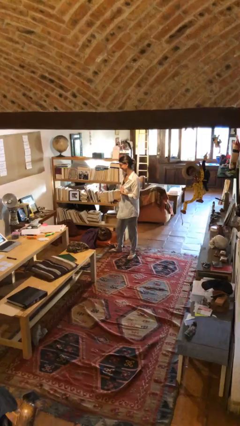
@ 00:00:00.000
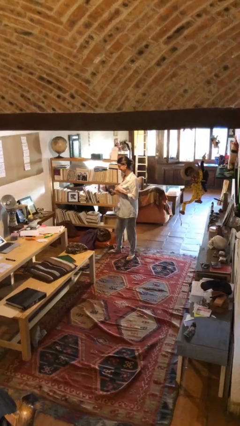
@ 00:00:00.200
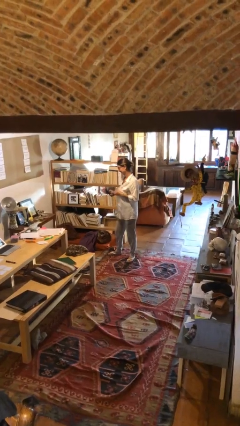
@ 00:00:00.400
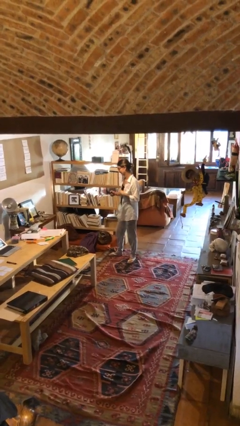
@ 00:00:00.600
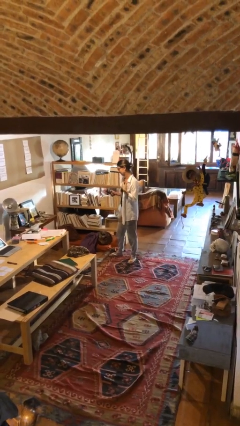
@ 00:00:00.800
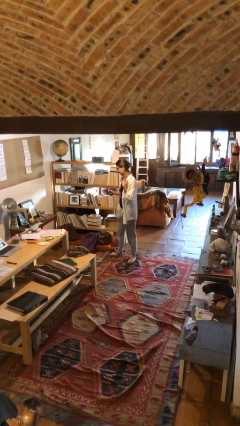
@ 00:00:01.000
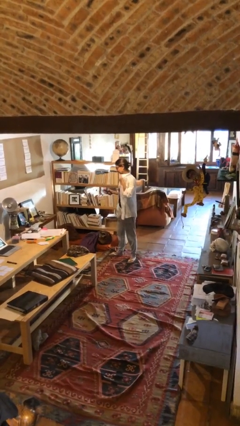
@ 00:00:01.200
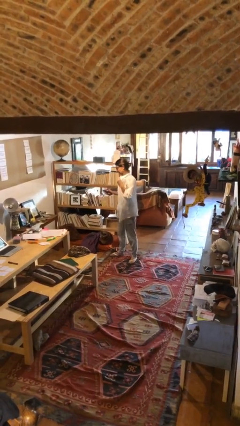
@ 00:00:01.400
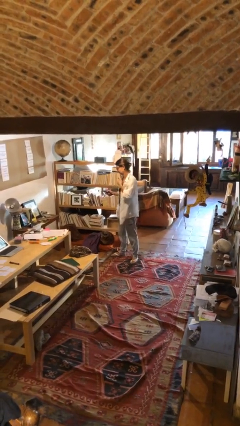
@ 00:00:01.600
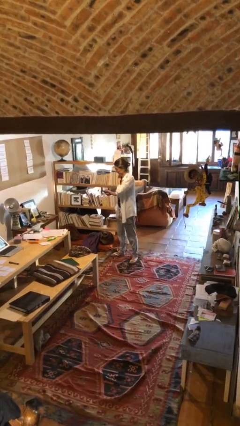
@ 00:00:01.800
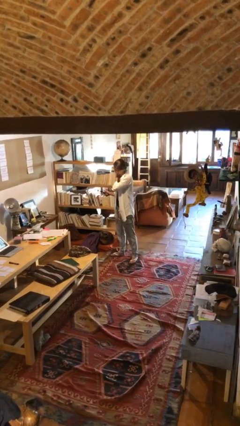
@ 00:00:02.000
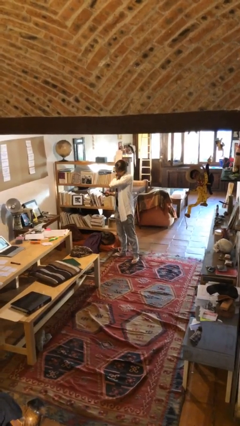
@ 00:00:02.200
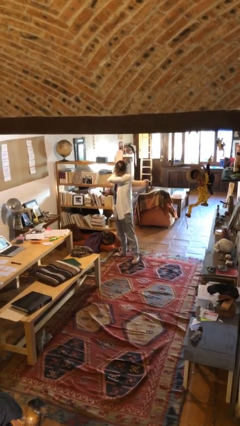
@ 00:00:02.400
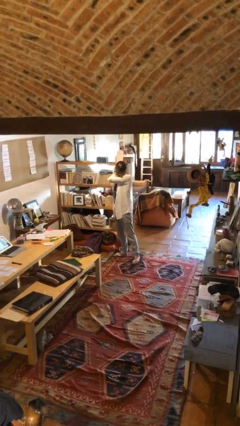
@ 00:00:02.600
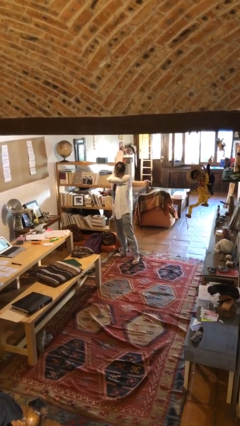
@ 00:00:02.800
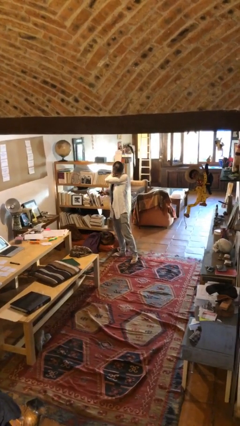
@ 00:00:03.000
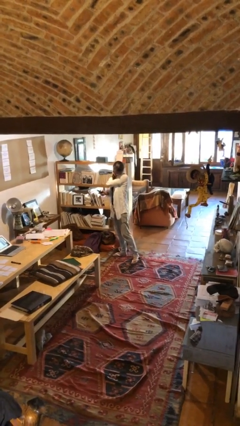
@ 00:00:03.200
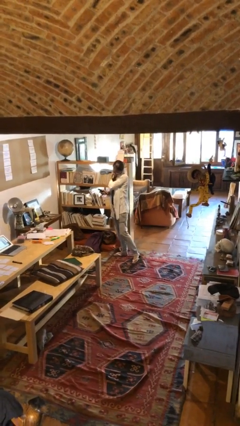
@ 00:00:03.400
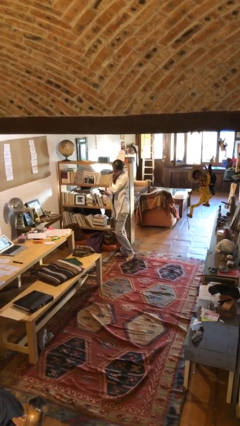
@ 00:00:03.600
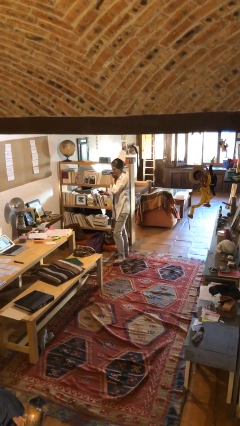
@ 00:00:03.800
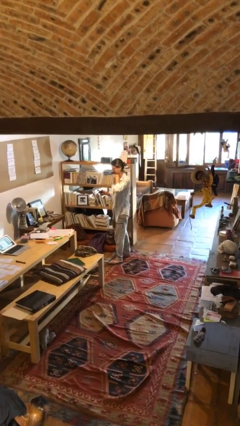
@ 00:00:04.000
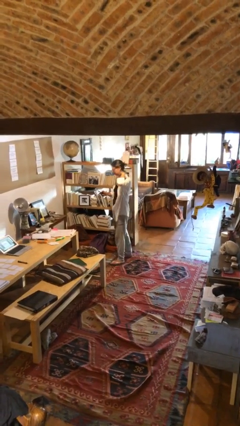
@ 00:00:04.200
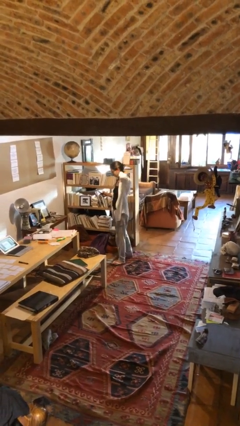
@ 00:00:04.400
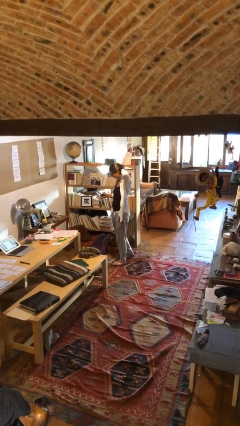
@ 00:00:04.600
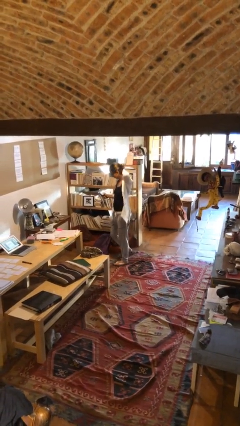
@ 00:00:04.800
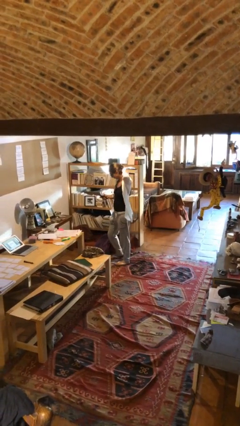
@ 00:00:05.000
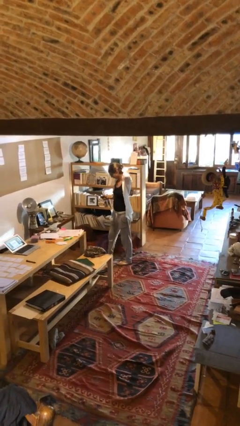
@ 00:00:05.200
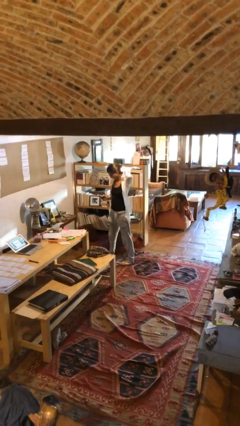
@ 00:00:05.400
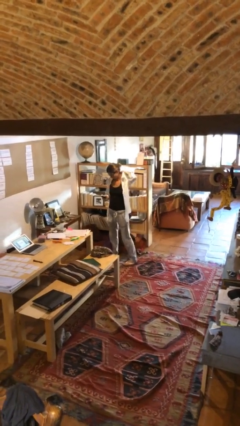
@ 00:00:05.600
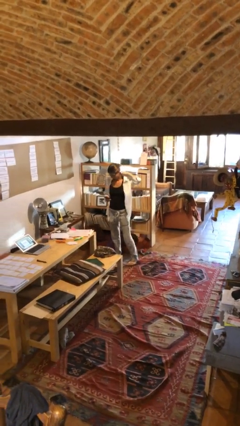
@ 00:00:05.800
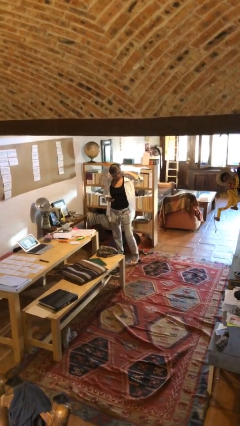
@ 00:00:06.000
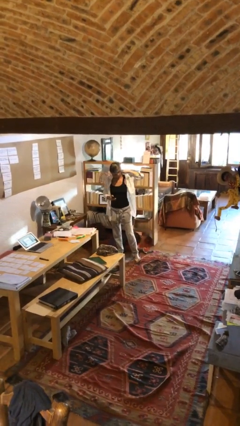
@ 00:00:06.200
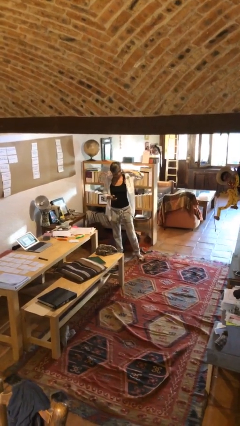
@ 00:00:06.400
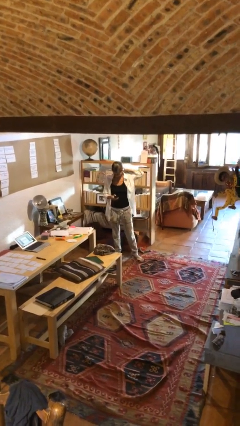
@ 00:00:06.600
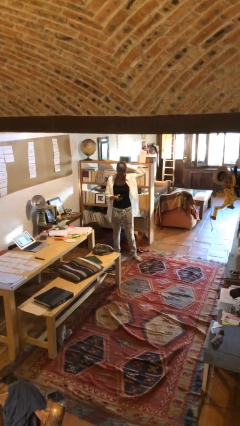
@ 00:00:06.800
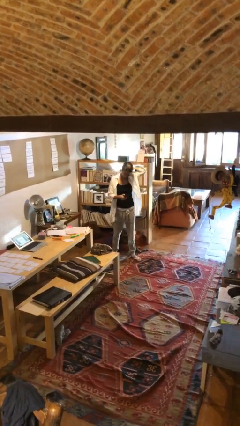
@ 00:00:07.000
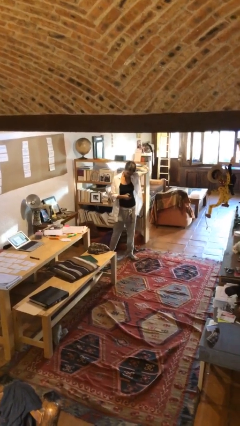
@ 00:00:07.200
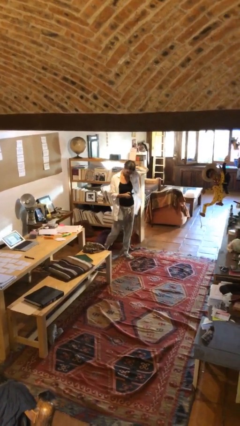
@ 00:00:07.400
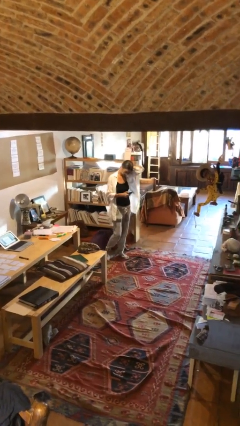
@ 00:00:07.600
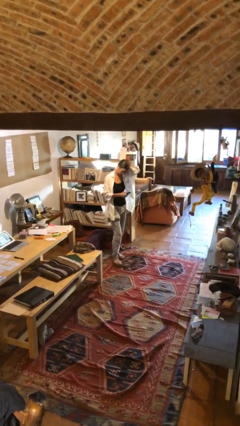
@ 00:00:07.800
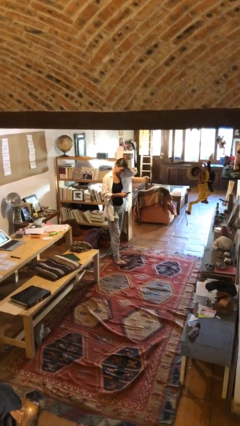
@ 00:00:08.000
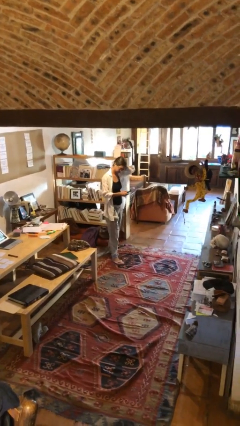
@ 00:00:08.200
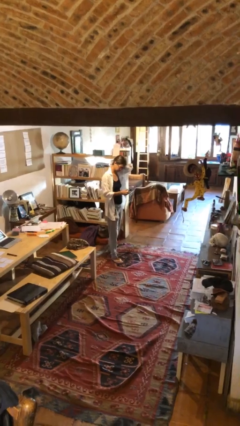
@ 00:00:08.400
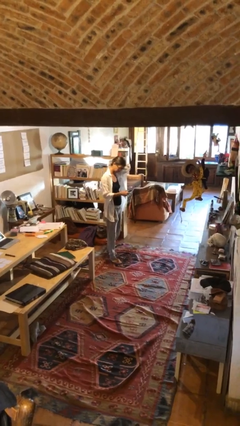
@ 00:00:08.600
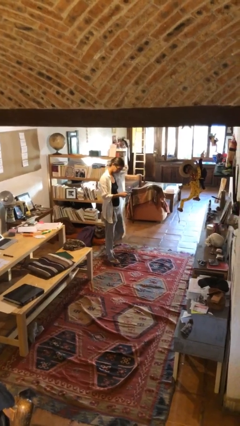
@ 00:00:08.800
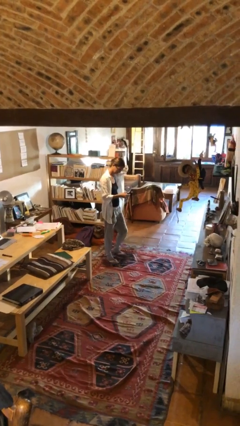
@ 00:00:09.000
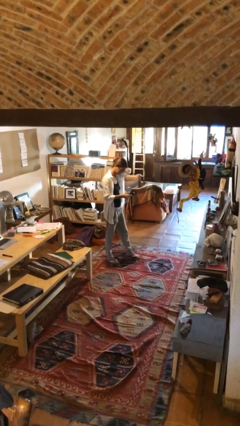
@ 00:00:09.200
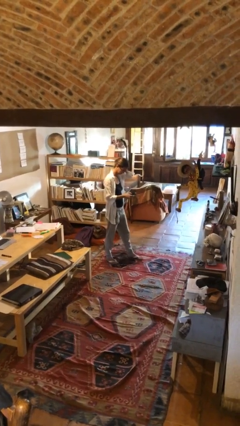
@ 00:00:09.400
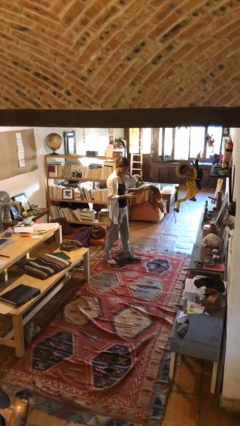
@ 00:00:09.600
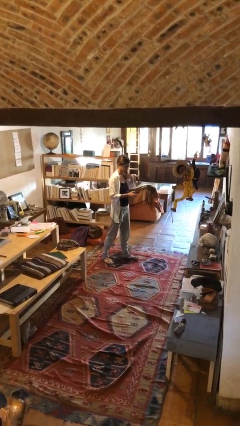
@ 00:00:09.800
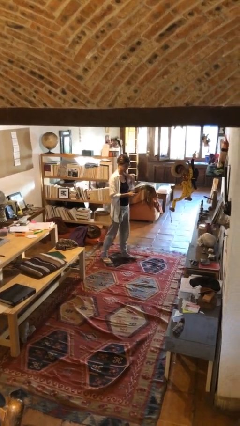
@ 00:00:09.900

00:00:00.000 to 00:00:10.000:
person texts on phone

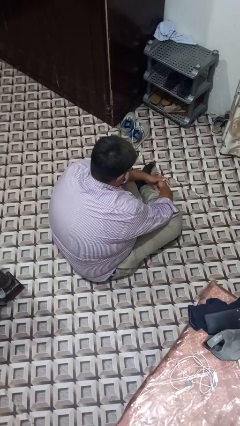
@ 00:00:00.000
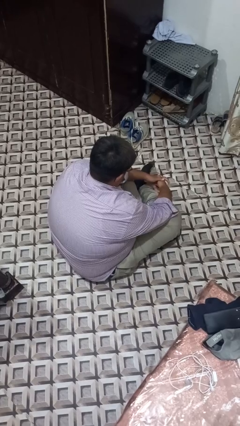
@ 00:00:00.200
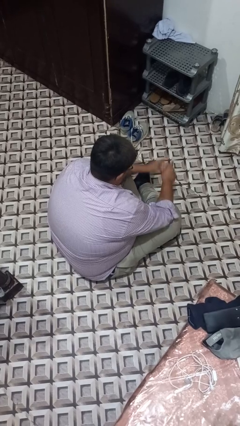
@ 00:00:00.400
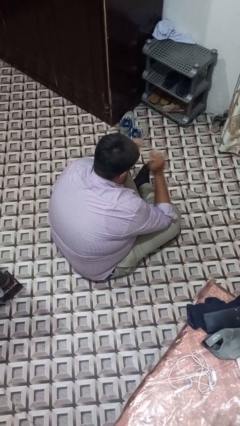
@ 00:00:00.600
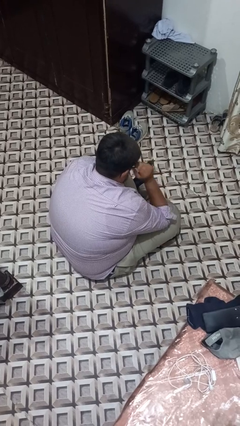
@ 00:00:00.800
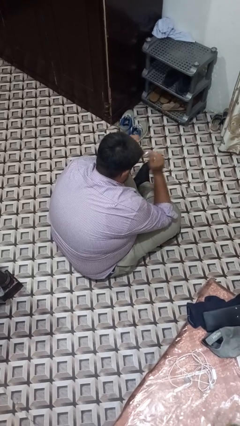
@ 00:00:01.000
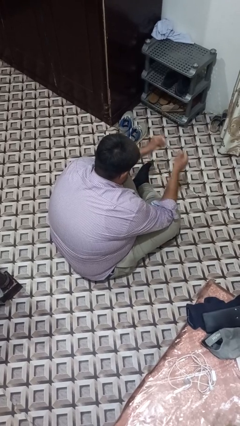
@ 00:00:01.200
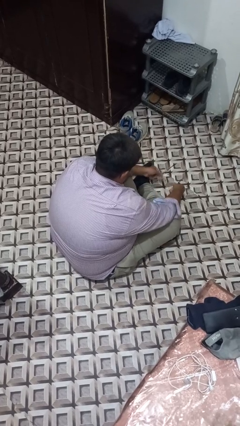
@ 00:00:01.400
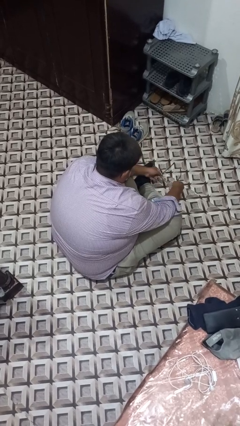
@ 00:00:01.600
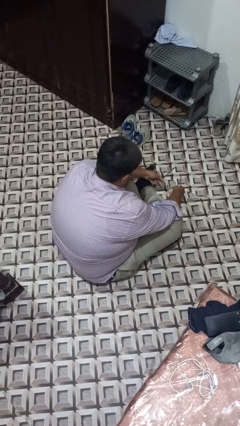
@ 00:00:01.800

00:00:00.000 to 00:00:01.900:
person takes off glasses

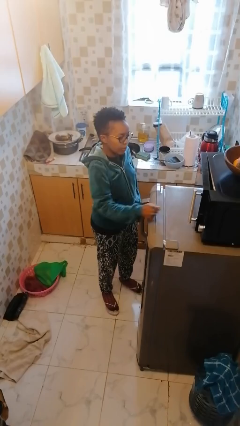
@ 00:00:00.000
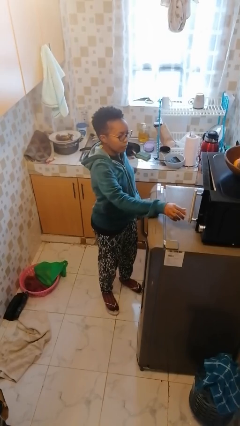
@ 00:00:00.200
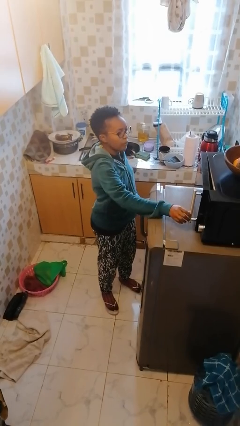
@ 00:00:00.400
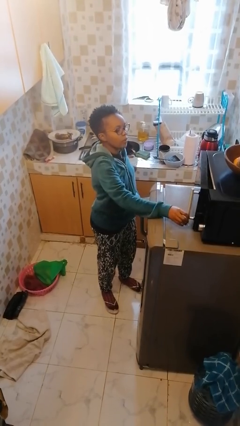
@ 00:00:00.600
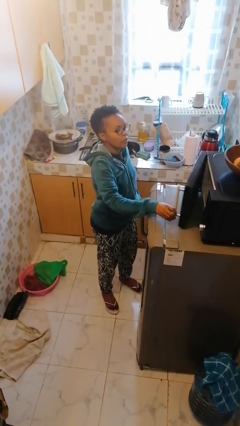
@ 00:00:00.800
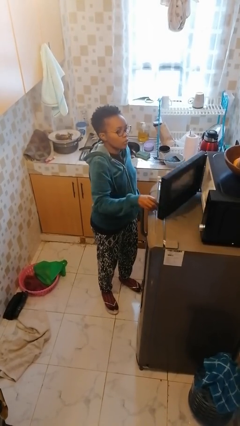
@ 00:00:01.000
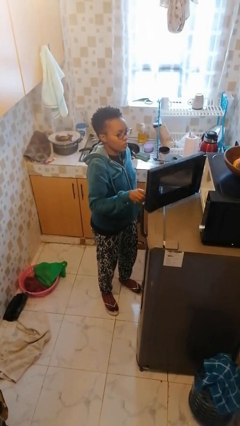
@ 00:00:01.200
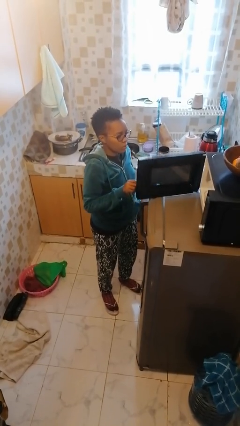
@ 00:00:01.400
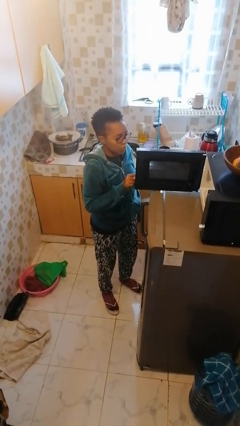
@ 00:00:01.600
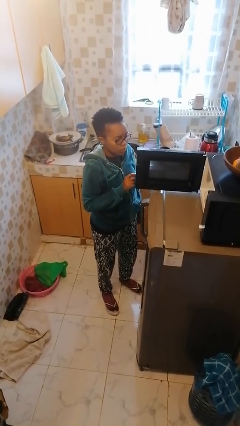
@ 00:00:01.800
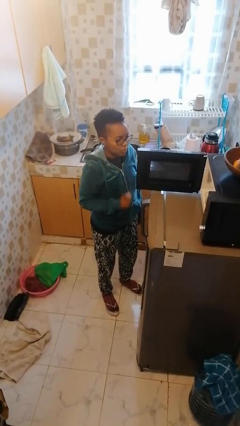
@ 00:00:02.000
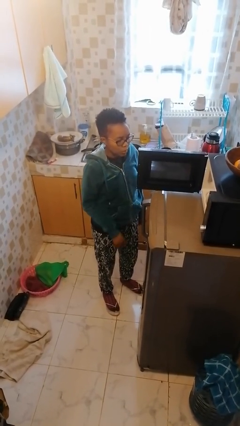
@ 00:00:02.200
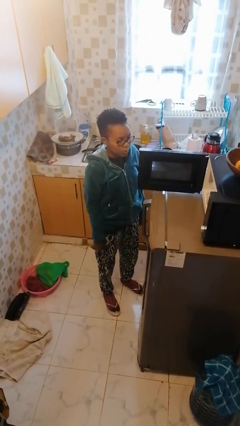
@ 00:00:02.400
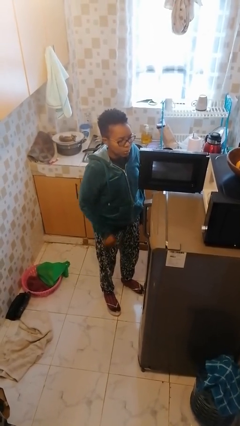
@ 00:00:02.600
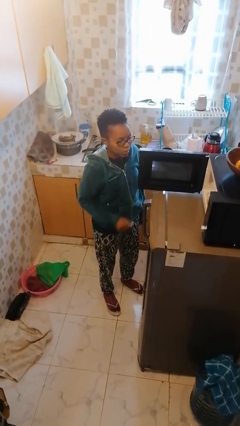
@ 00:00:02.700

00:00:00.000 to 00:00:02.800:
person opens microwave

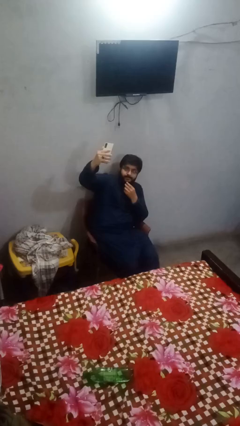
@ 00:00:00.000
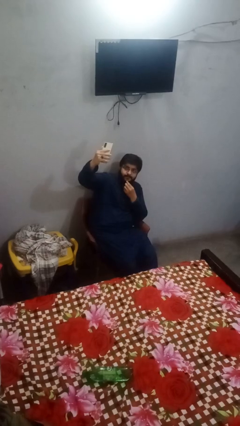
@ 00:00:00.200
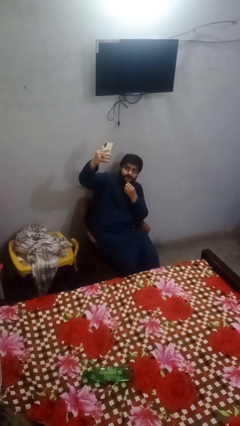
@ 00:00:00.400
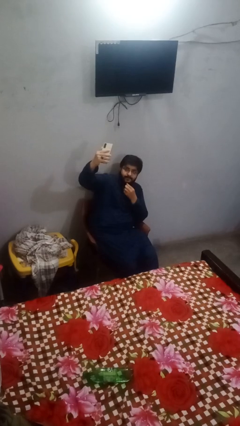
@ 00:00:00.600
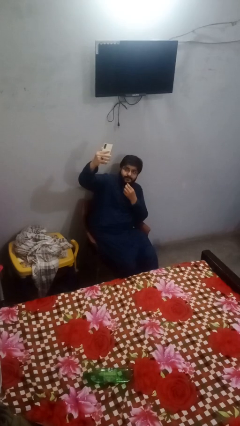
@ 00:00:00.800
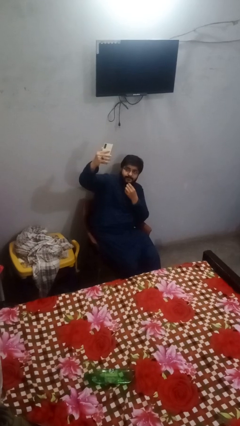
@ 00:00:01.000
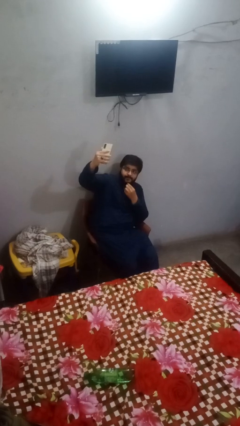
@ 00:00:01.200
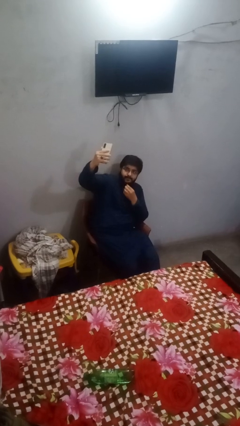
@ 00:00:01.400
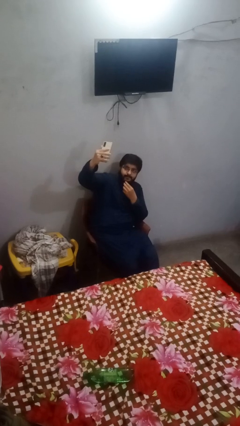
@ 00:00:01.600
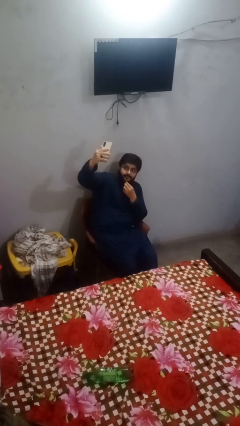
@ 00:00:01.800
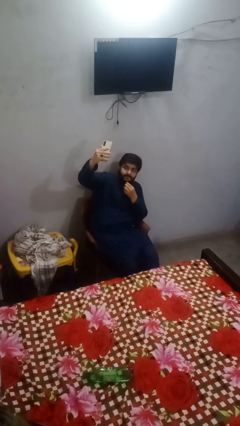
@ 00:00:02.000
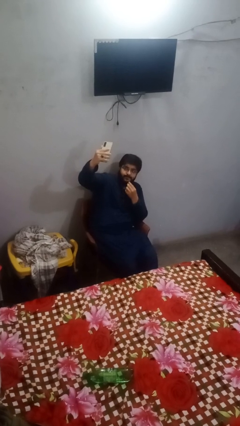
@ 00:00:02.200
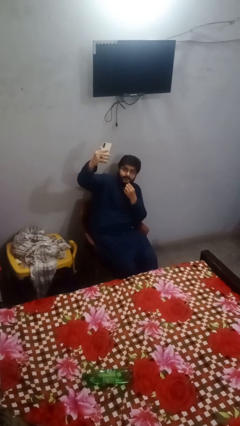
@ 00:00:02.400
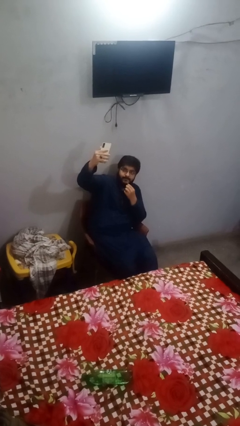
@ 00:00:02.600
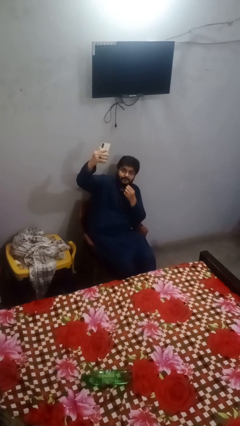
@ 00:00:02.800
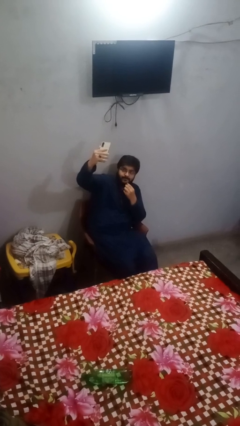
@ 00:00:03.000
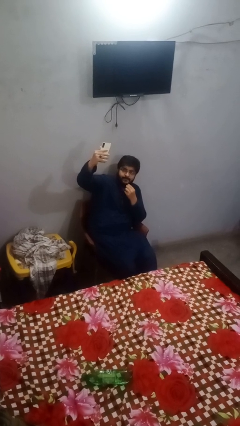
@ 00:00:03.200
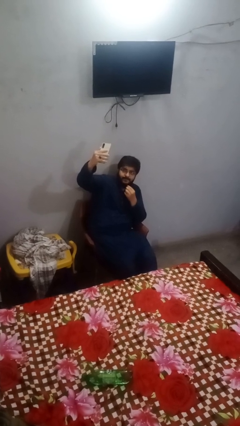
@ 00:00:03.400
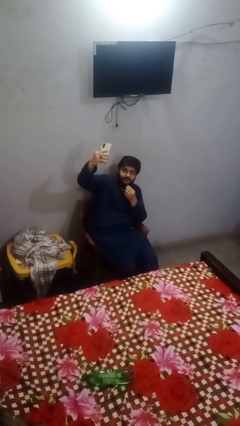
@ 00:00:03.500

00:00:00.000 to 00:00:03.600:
person takes selfie
